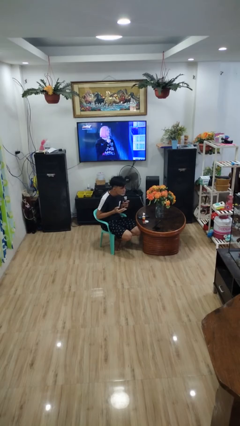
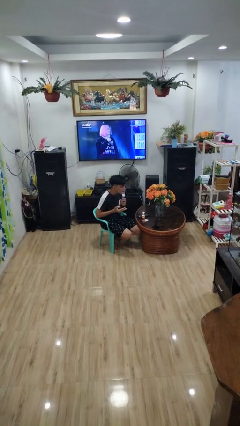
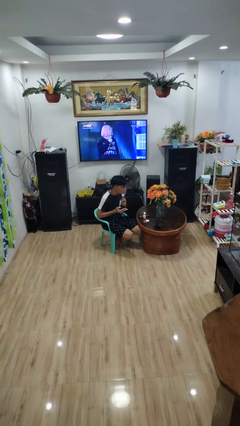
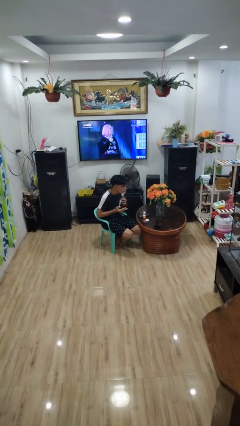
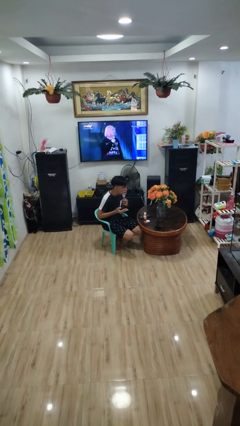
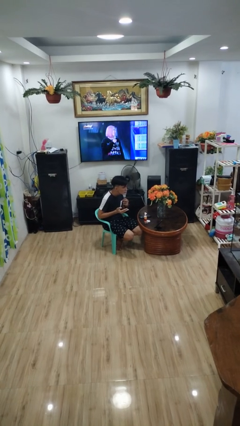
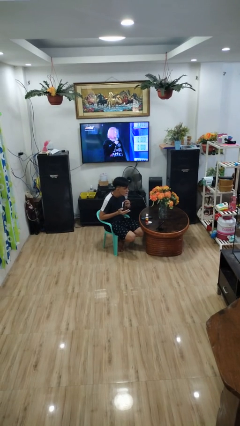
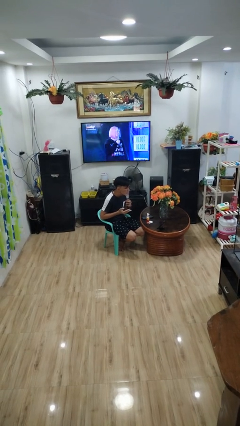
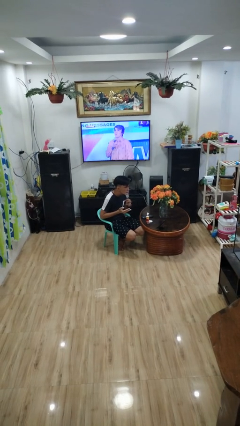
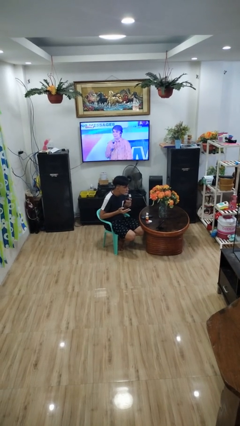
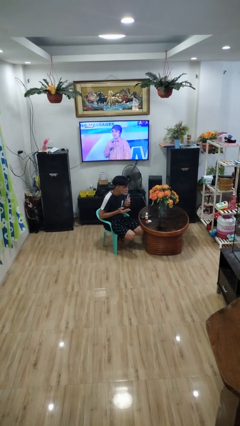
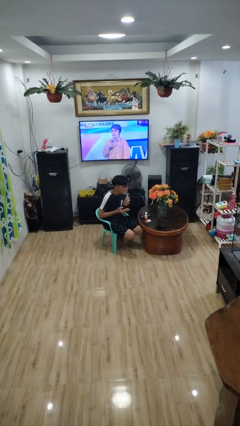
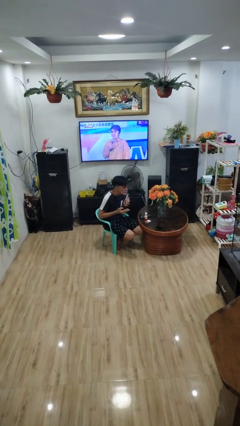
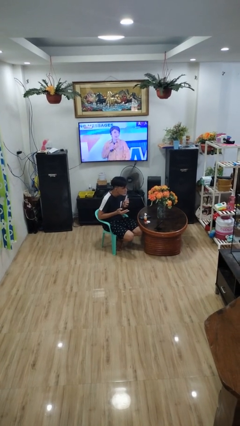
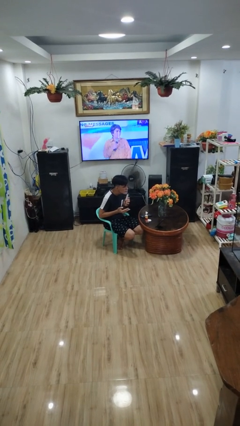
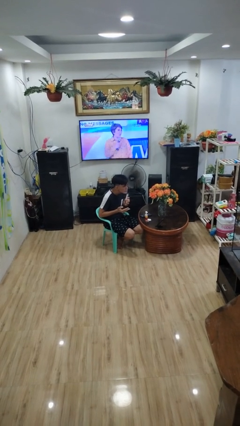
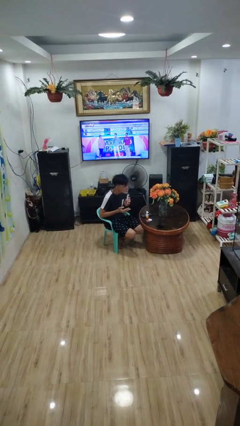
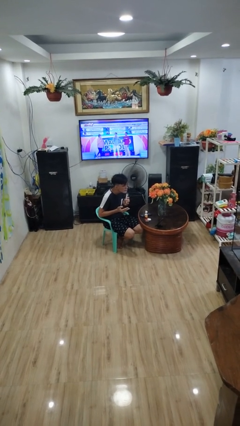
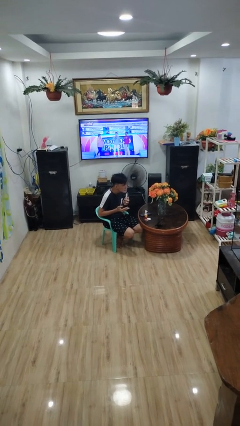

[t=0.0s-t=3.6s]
person shaves face

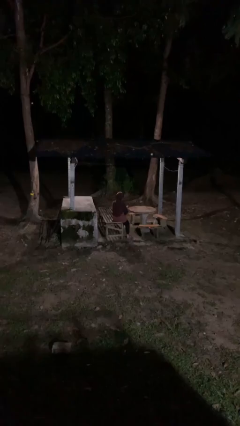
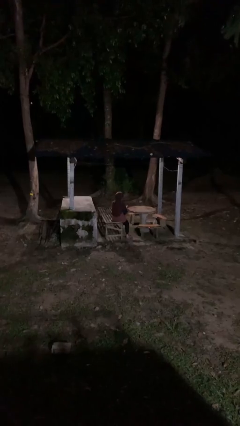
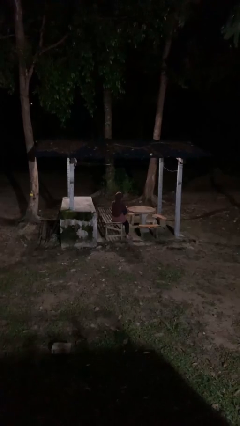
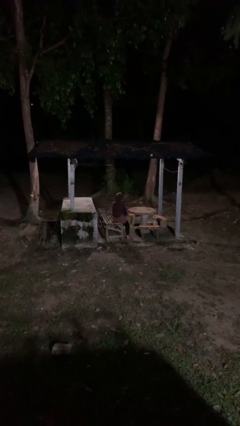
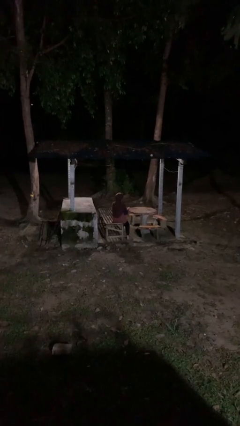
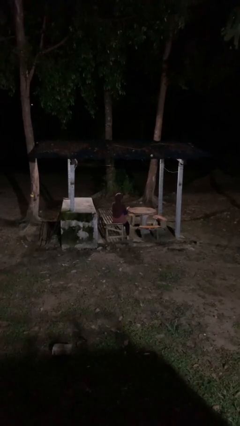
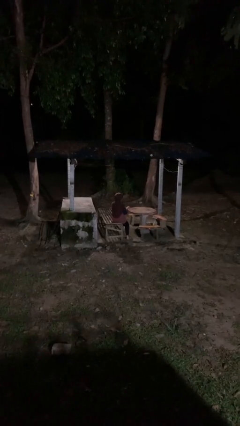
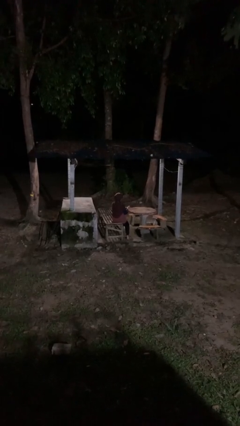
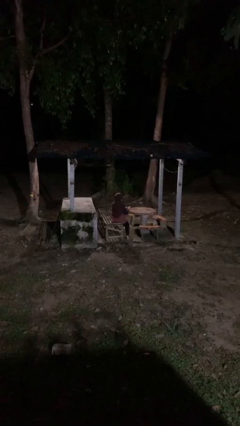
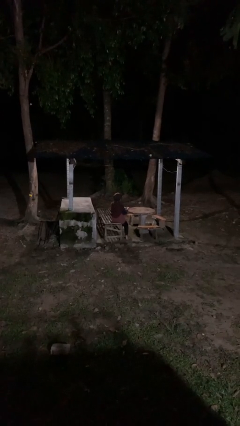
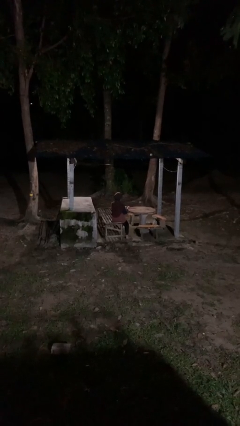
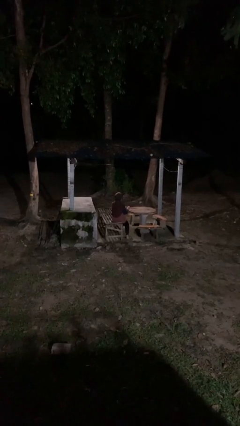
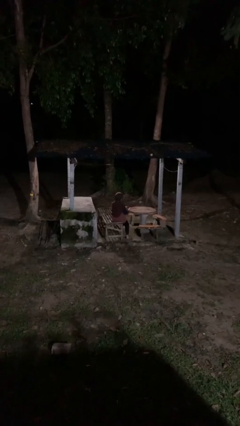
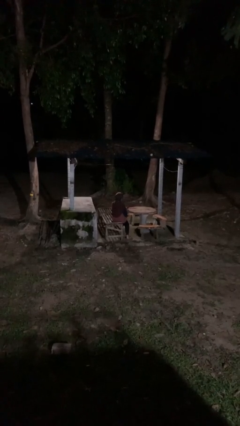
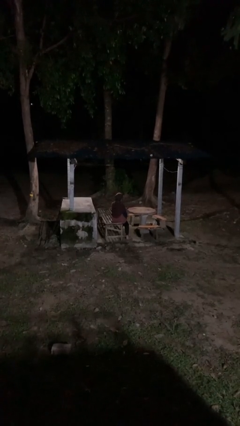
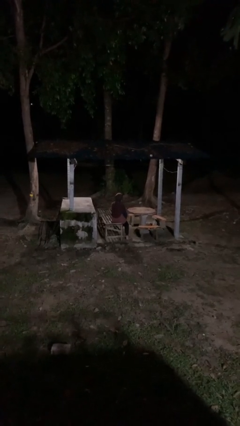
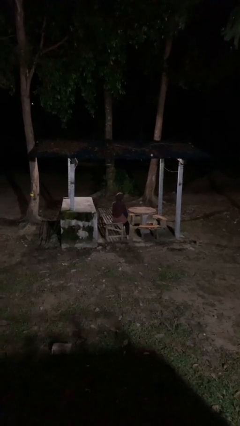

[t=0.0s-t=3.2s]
person paints fingernails

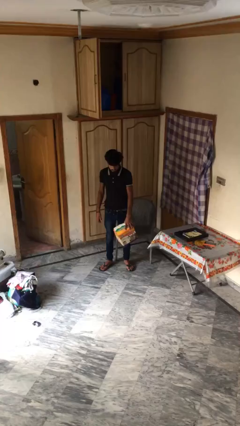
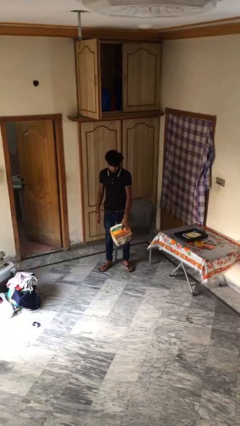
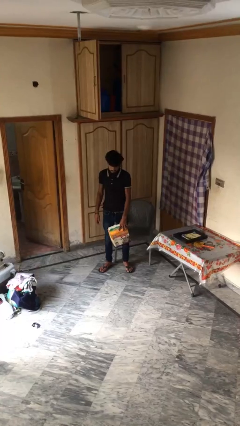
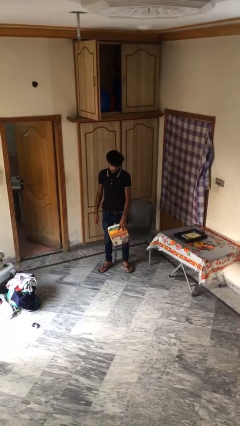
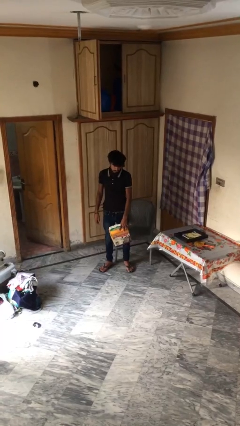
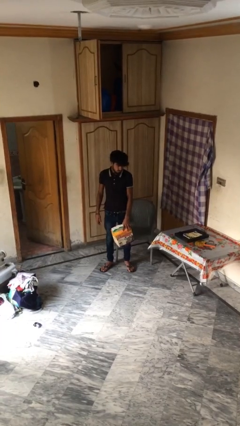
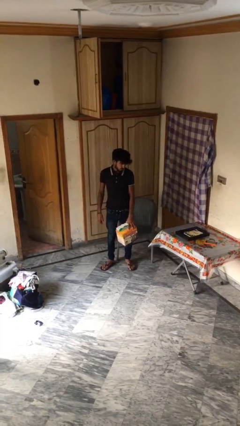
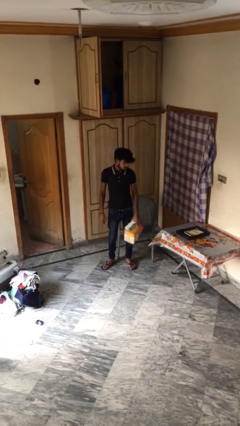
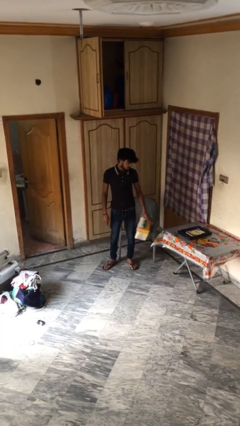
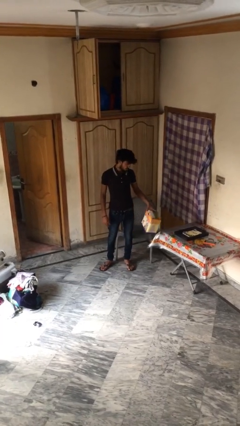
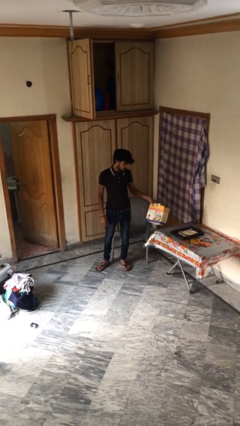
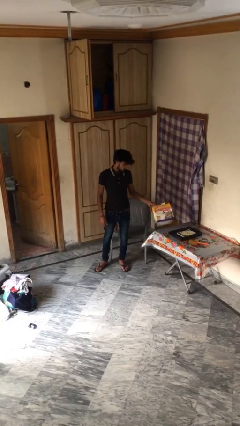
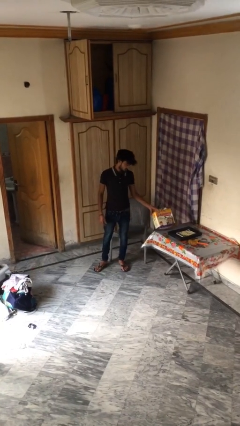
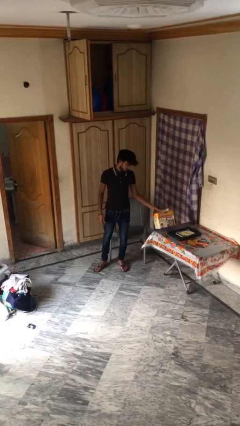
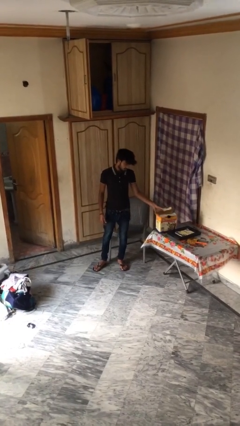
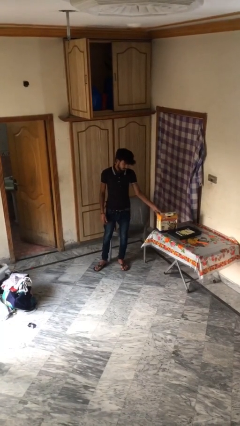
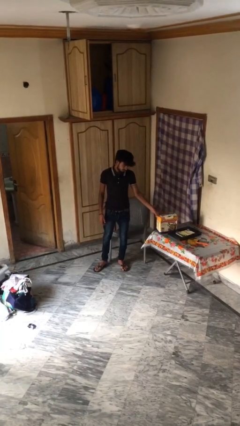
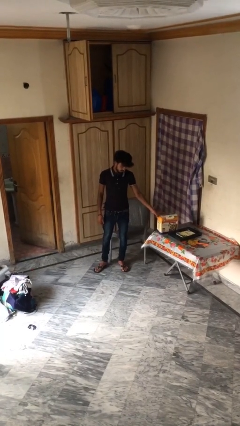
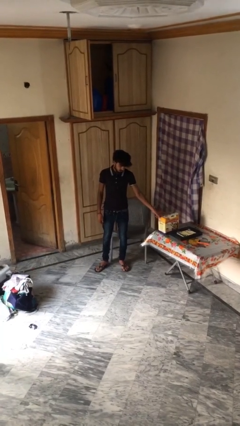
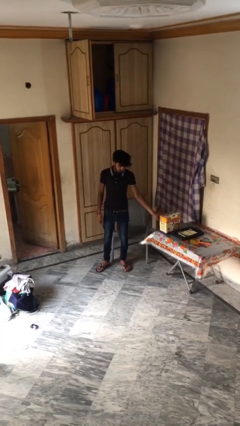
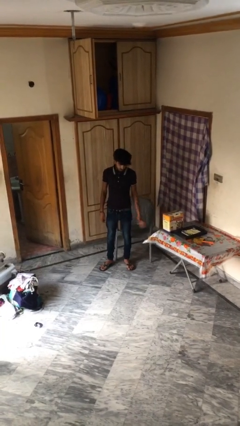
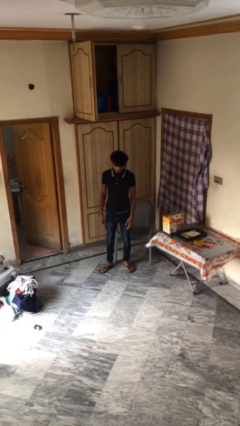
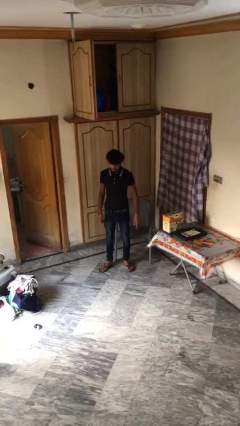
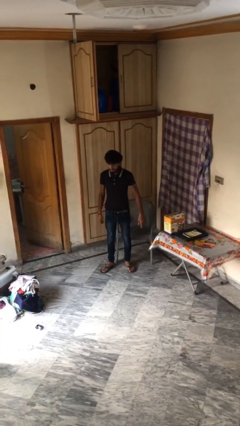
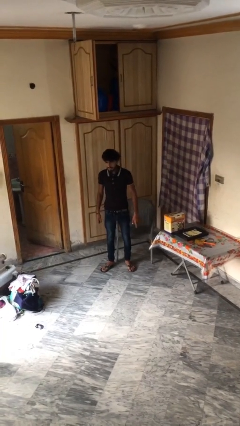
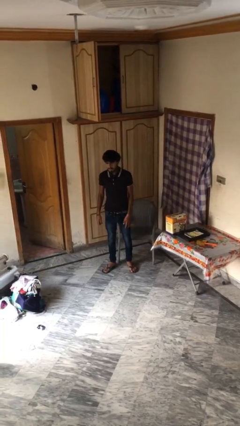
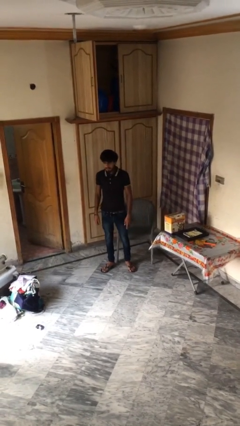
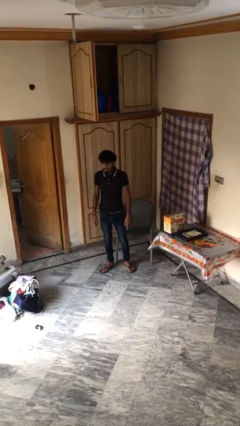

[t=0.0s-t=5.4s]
person puts down object on table

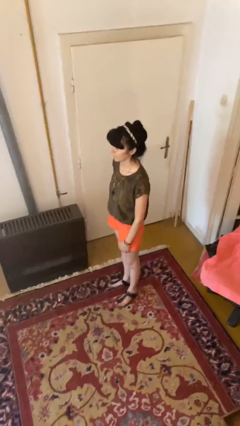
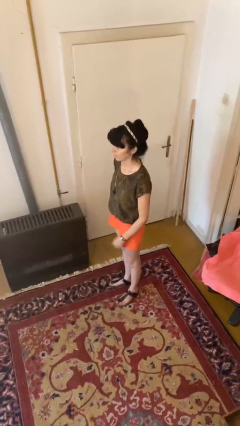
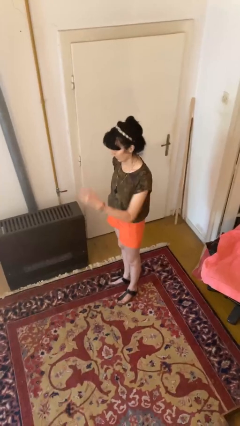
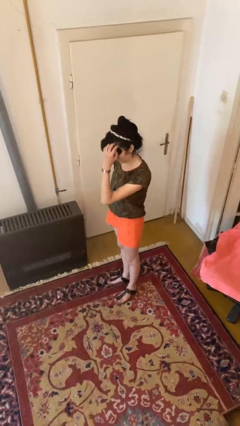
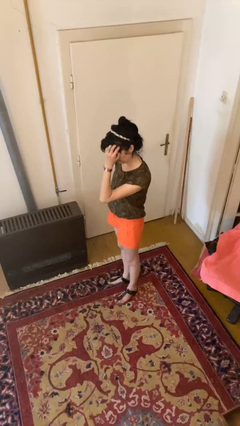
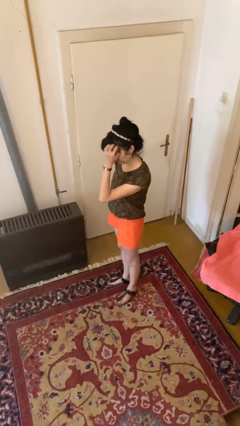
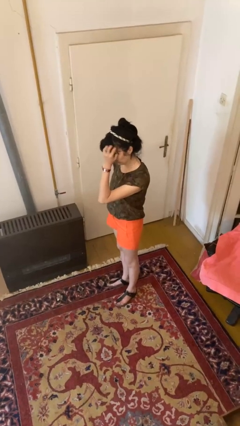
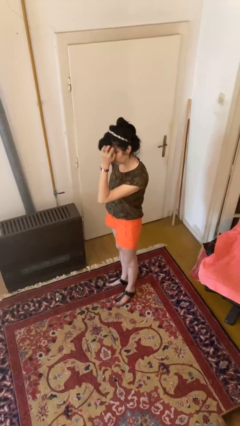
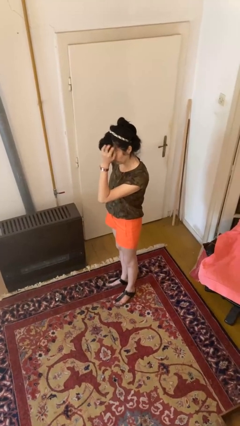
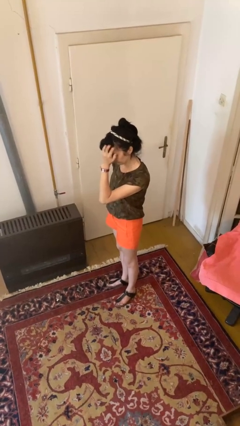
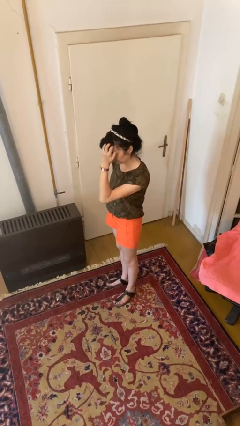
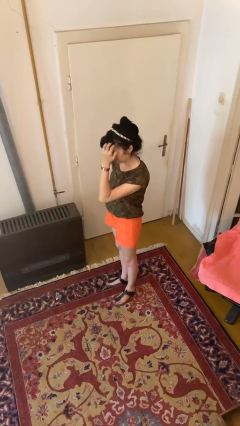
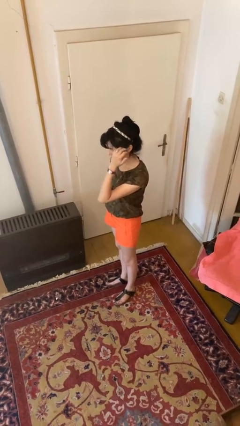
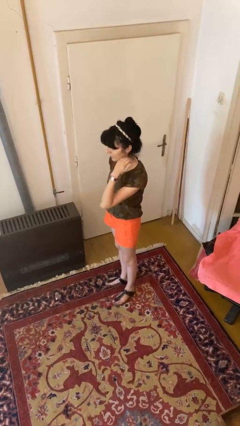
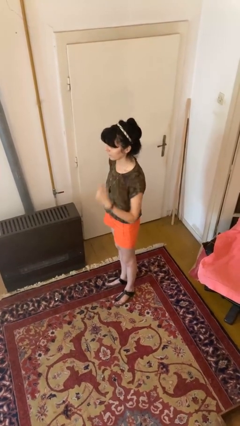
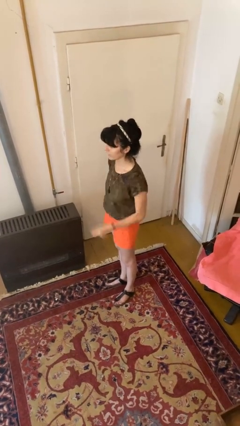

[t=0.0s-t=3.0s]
person scratches face

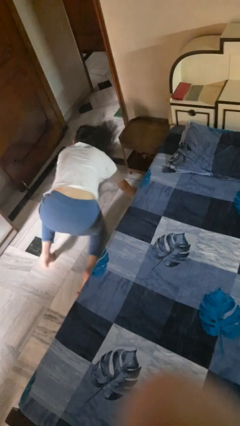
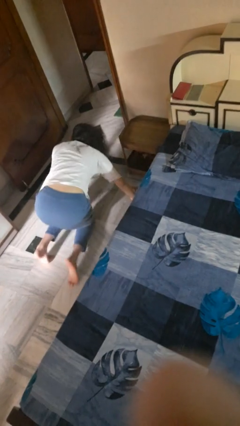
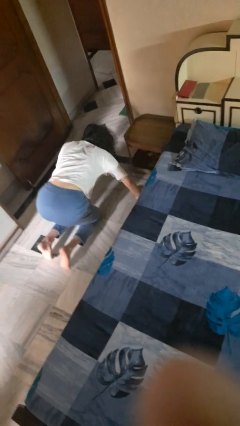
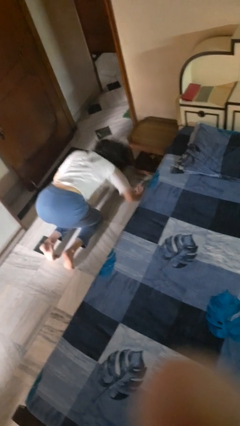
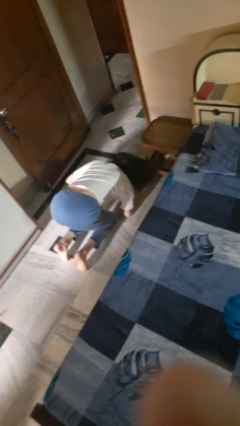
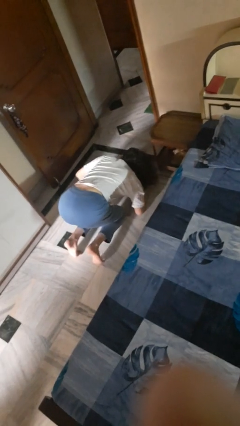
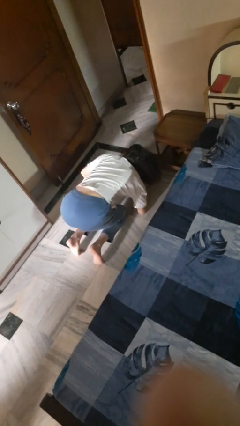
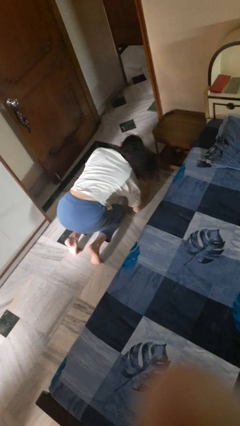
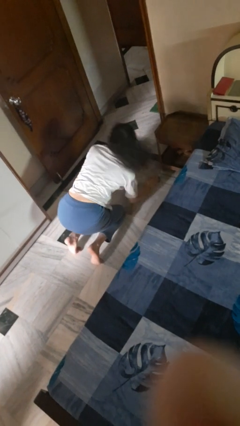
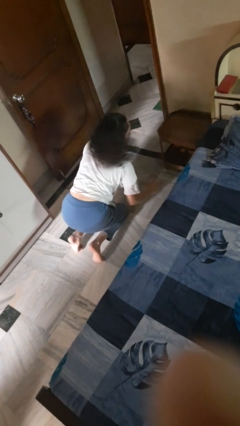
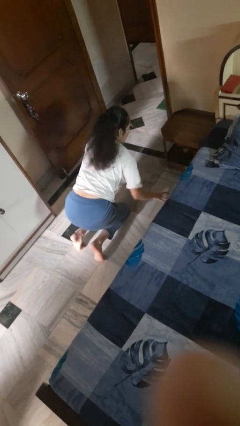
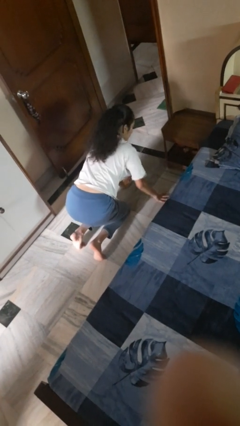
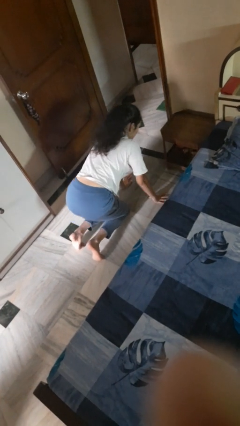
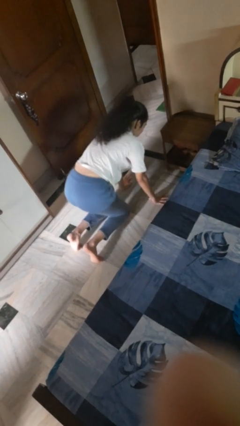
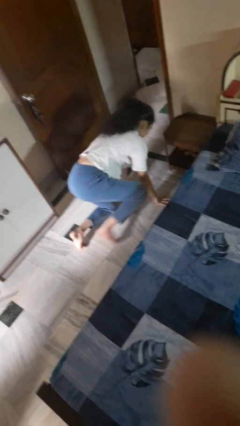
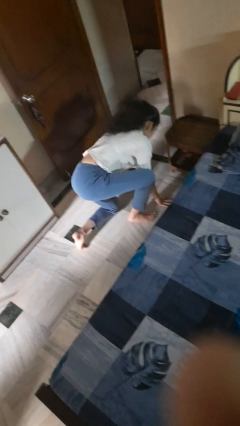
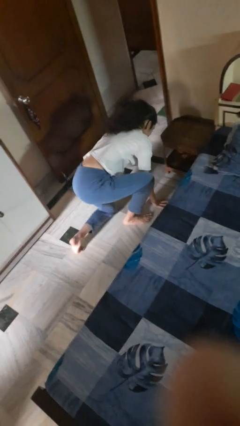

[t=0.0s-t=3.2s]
person falls from bed
